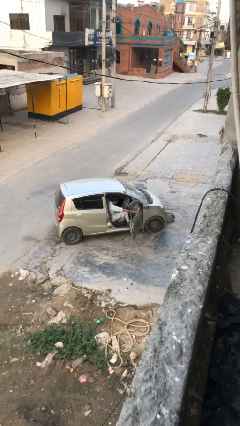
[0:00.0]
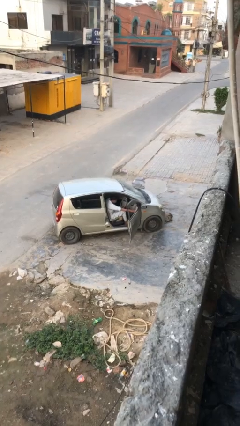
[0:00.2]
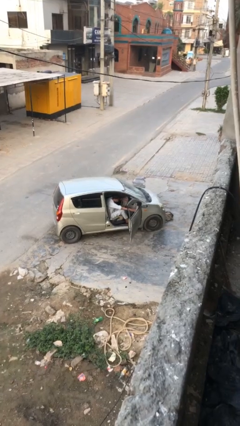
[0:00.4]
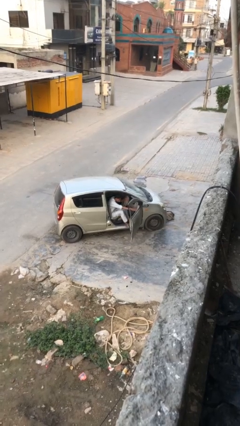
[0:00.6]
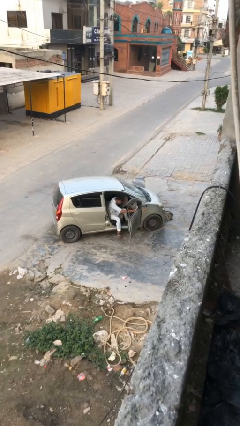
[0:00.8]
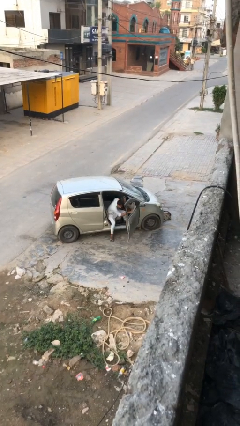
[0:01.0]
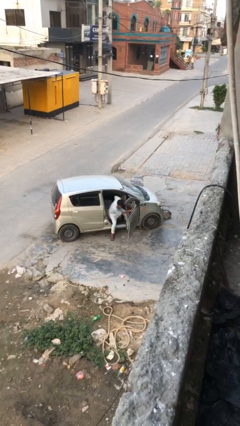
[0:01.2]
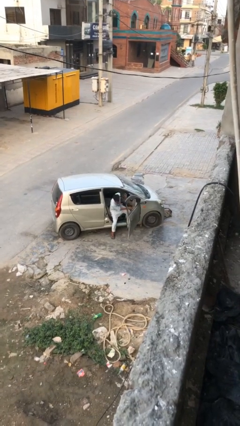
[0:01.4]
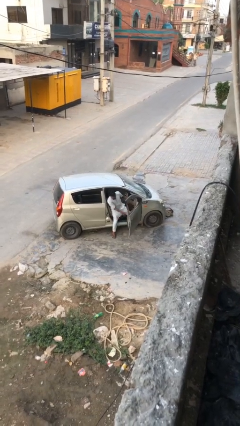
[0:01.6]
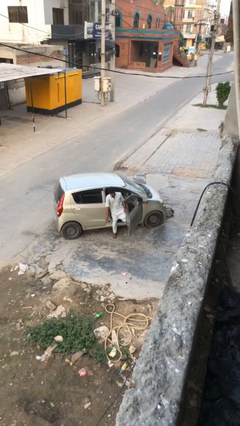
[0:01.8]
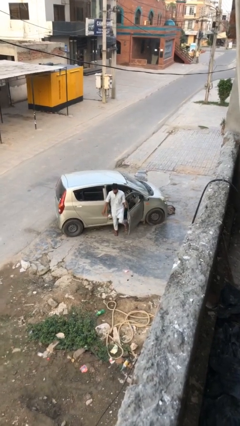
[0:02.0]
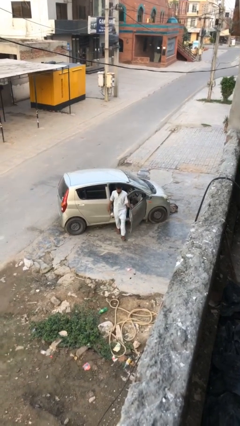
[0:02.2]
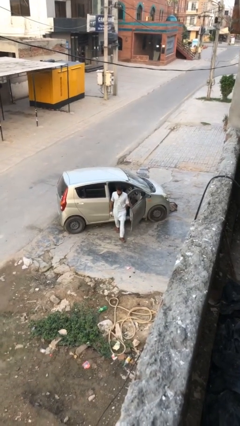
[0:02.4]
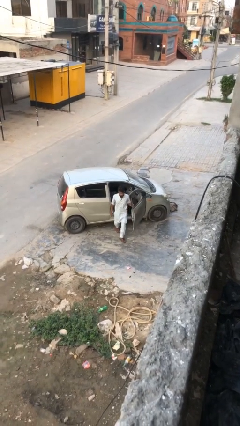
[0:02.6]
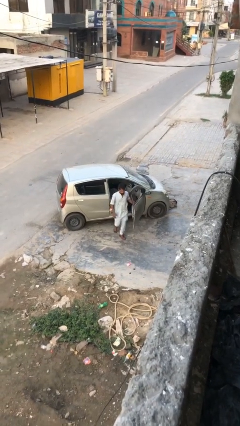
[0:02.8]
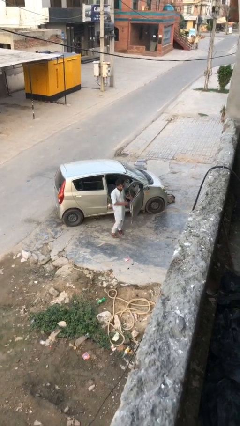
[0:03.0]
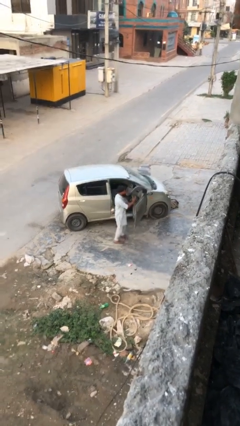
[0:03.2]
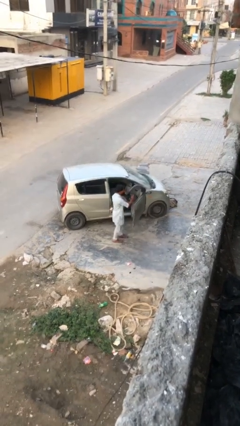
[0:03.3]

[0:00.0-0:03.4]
person exits car

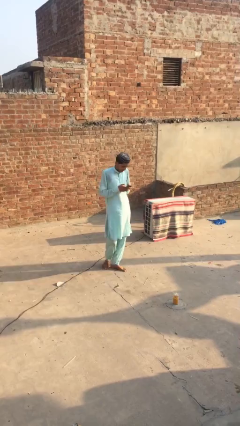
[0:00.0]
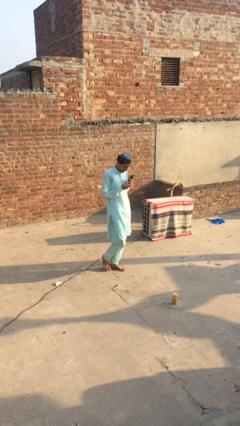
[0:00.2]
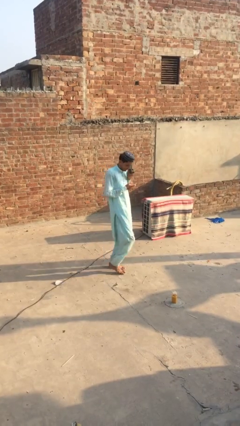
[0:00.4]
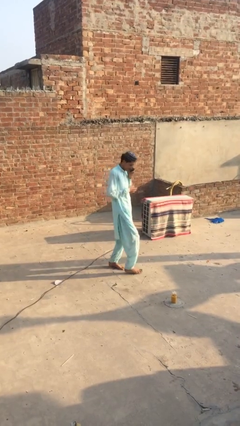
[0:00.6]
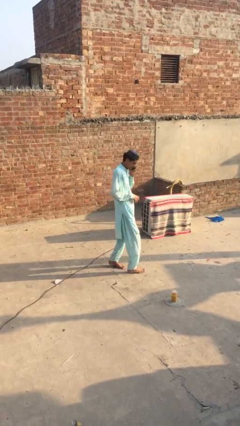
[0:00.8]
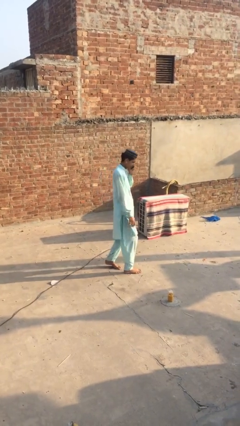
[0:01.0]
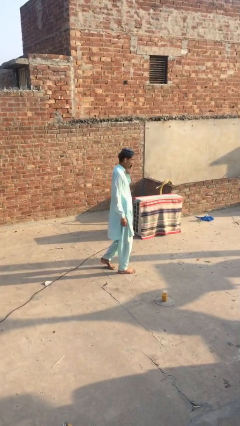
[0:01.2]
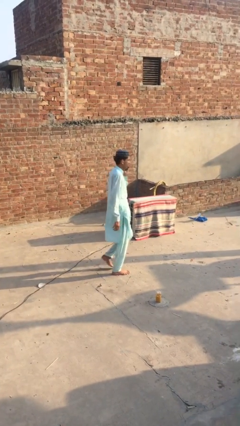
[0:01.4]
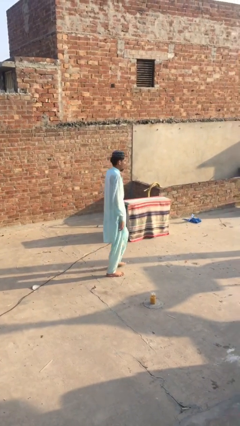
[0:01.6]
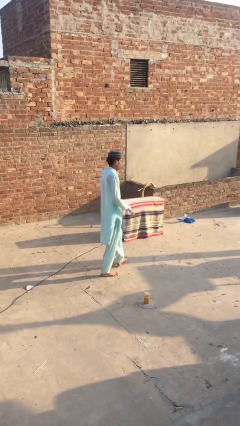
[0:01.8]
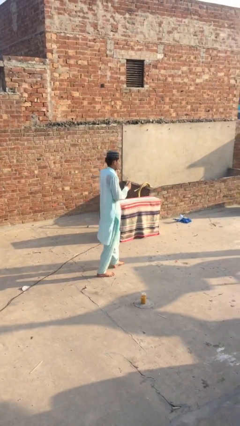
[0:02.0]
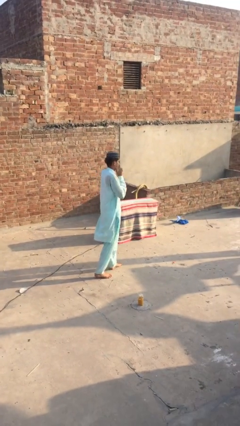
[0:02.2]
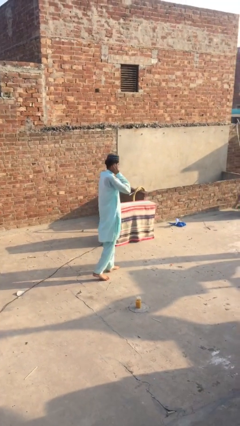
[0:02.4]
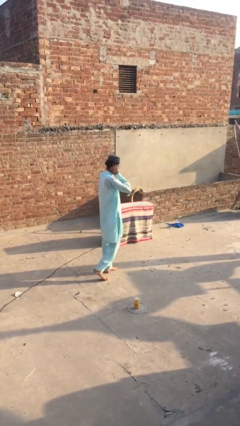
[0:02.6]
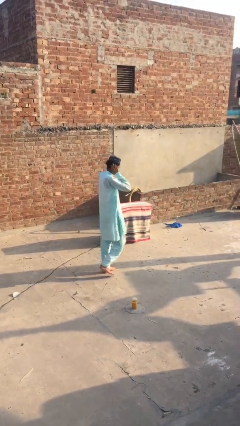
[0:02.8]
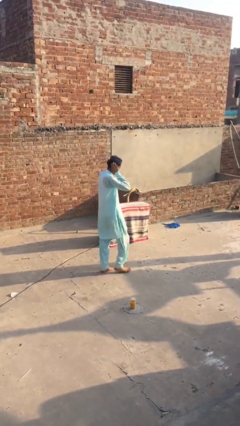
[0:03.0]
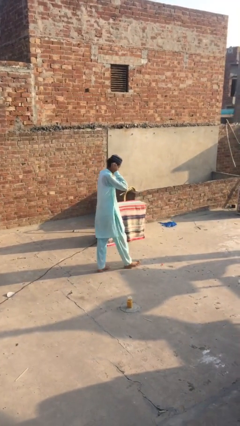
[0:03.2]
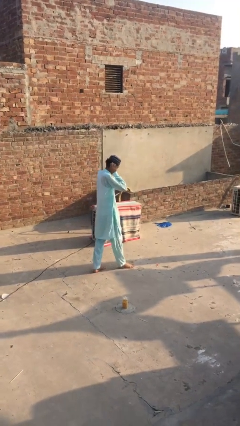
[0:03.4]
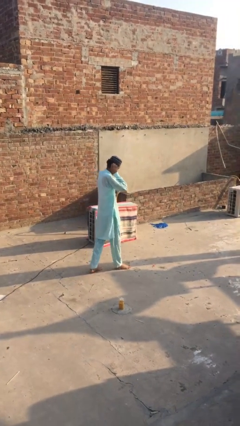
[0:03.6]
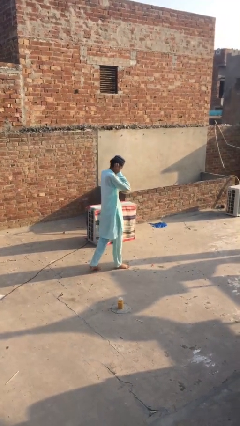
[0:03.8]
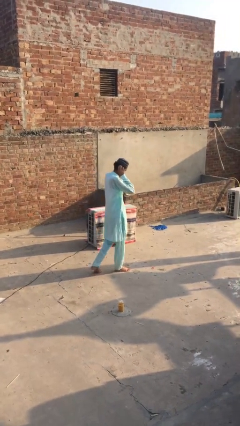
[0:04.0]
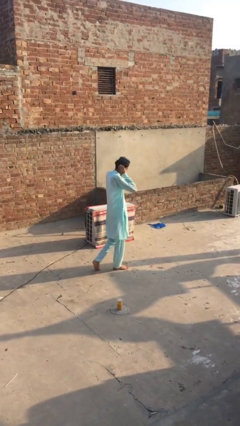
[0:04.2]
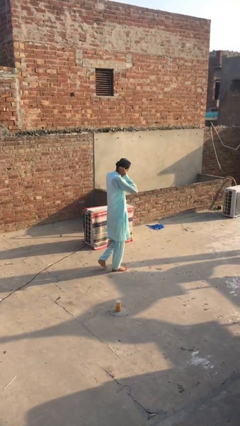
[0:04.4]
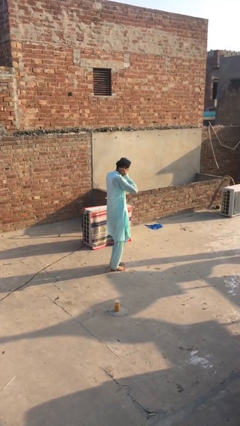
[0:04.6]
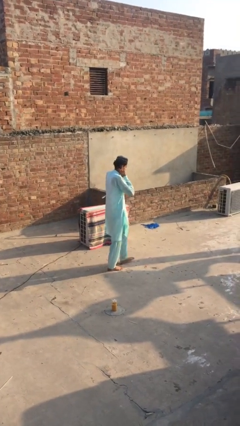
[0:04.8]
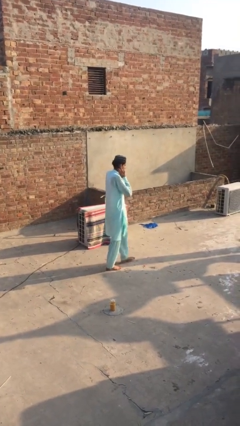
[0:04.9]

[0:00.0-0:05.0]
person talks on phone

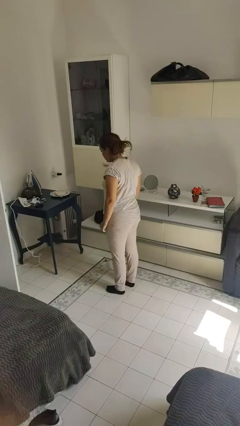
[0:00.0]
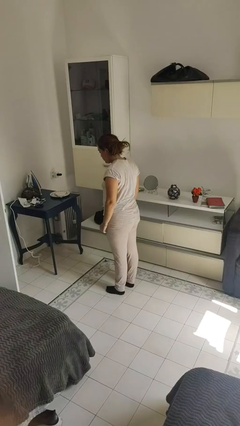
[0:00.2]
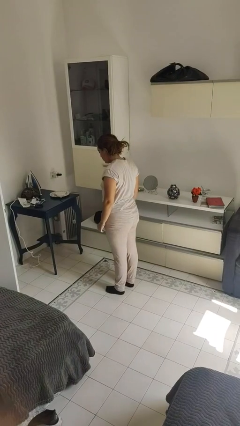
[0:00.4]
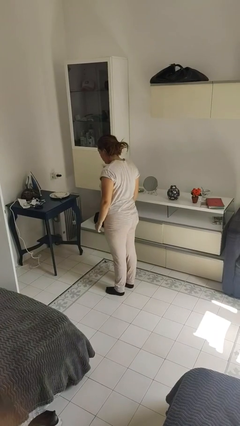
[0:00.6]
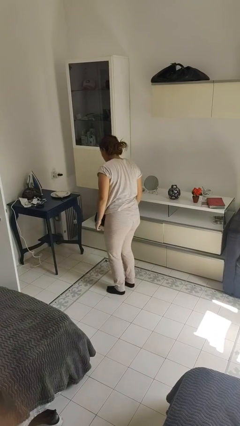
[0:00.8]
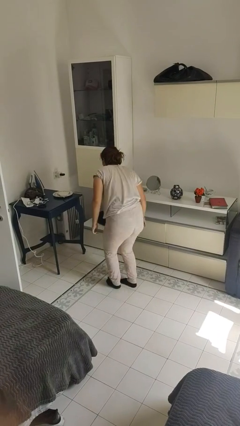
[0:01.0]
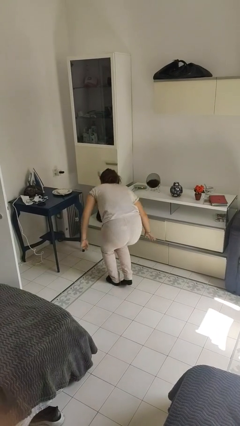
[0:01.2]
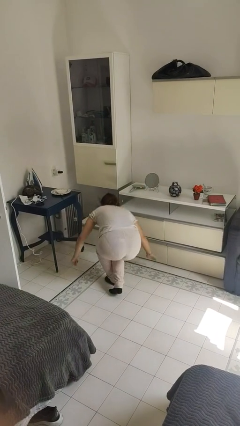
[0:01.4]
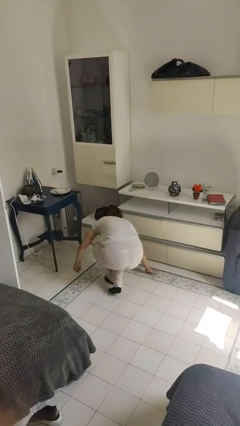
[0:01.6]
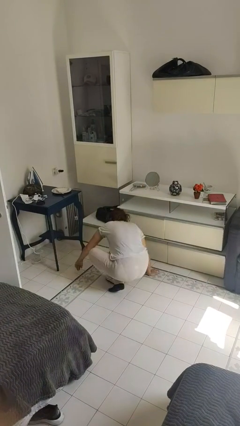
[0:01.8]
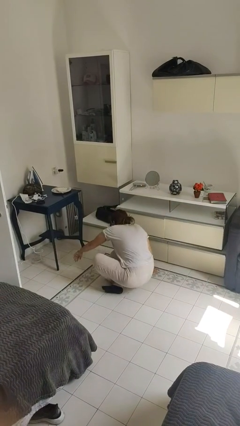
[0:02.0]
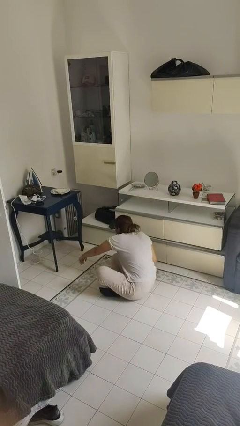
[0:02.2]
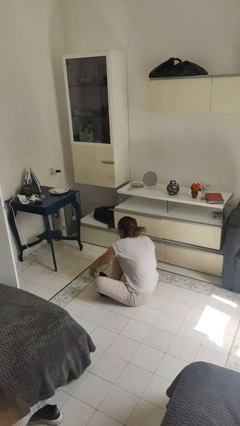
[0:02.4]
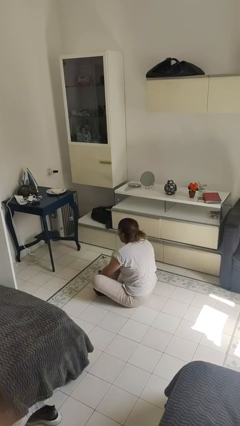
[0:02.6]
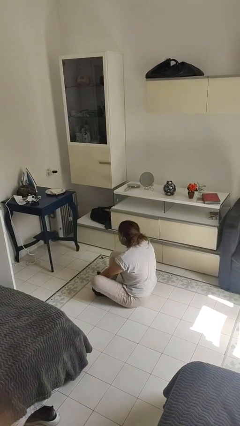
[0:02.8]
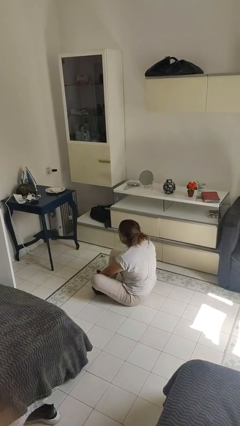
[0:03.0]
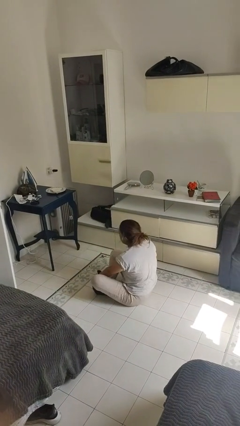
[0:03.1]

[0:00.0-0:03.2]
person sits crisscross

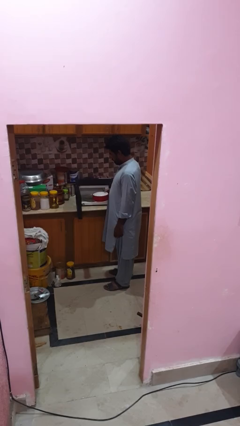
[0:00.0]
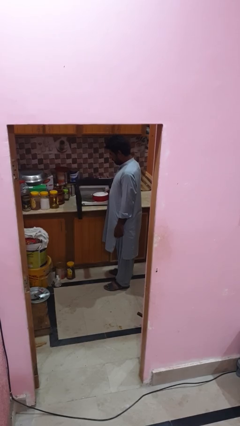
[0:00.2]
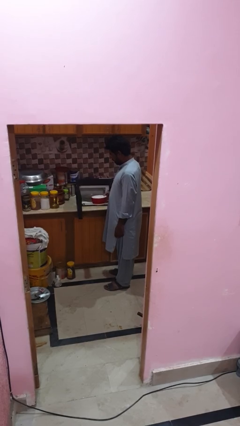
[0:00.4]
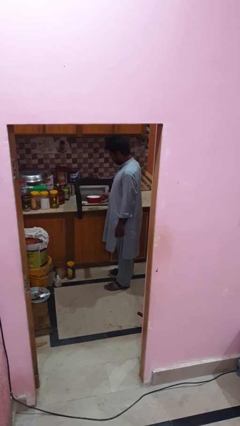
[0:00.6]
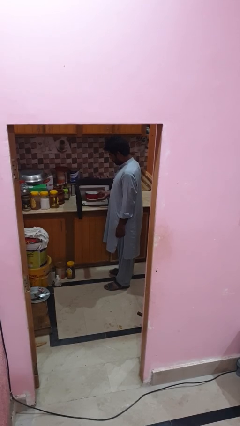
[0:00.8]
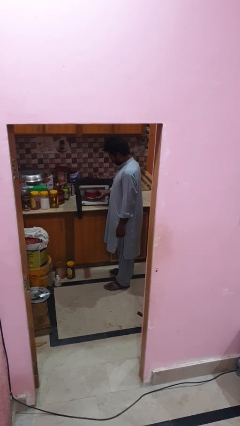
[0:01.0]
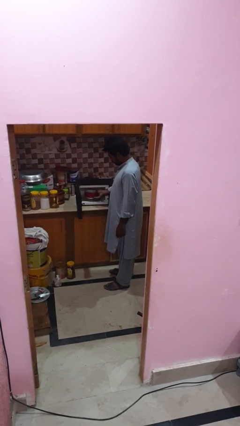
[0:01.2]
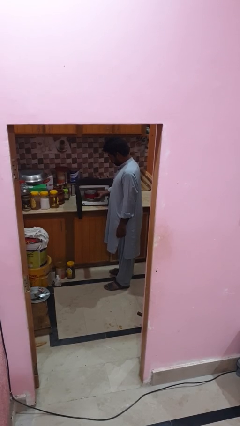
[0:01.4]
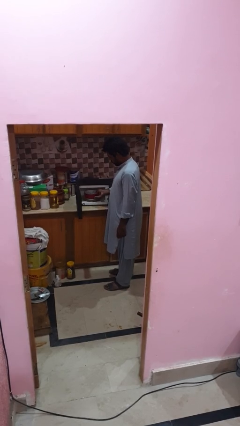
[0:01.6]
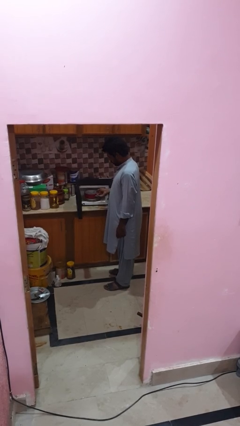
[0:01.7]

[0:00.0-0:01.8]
person puts object into microwave

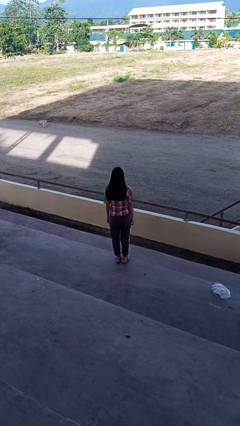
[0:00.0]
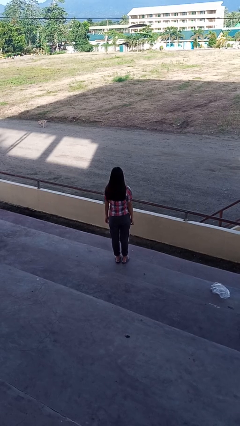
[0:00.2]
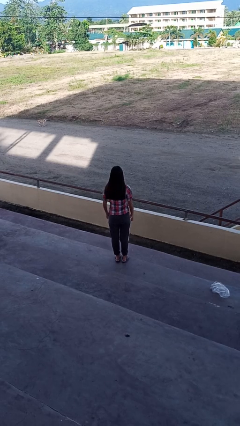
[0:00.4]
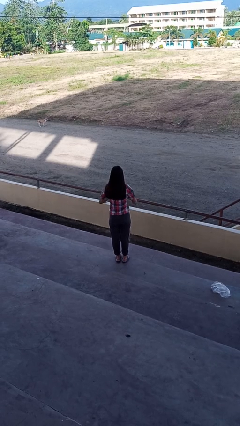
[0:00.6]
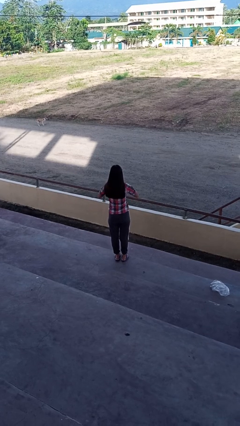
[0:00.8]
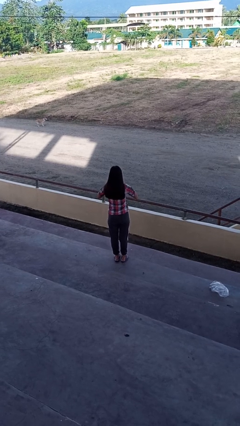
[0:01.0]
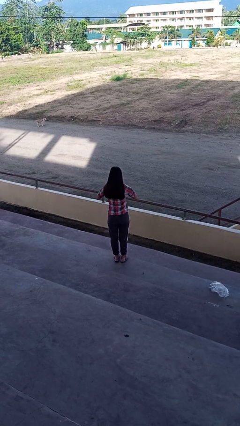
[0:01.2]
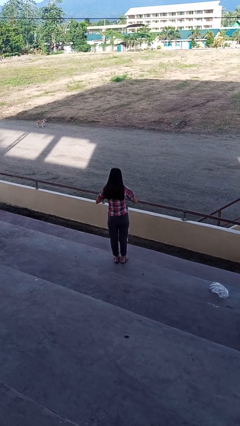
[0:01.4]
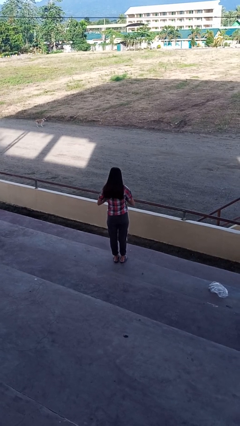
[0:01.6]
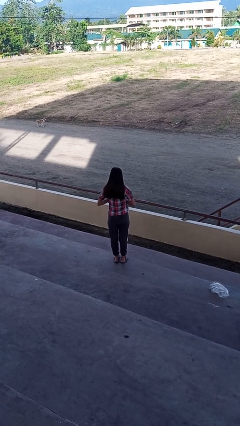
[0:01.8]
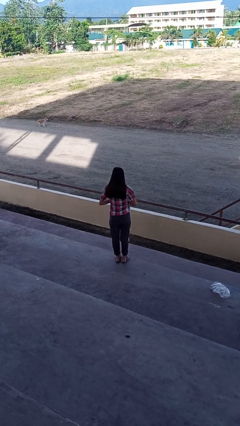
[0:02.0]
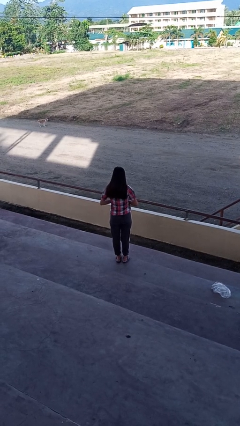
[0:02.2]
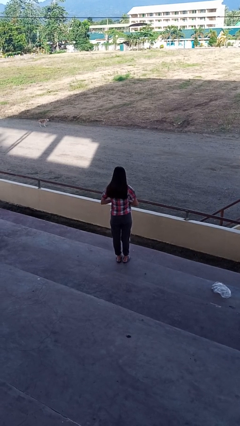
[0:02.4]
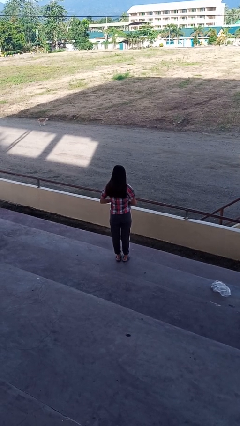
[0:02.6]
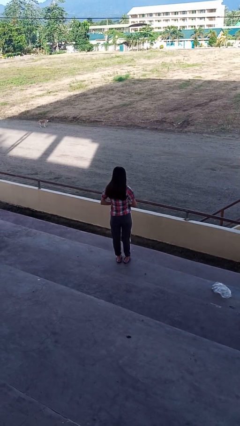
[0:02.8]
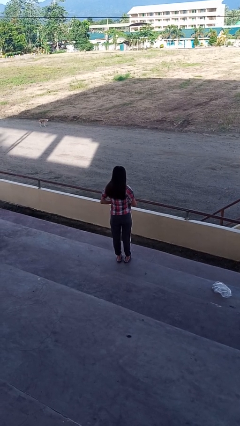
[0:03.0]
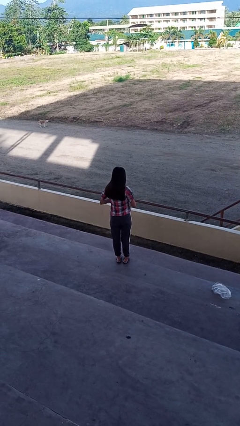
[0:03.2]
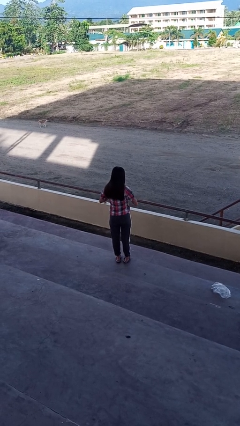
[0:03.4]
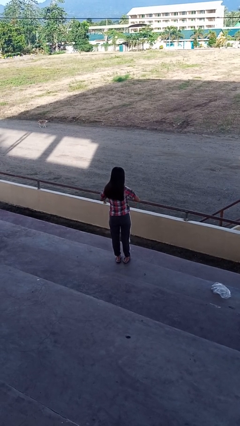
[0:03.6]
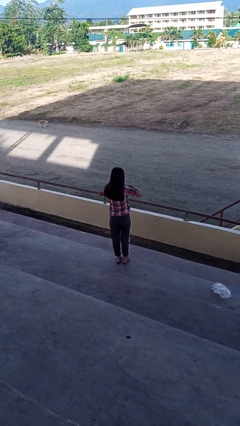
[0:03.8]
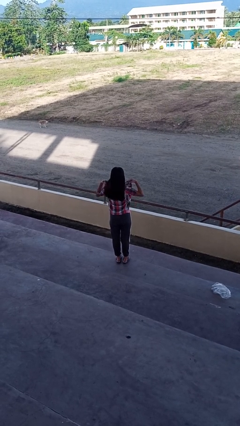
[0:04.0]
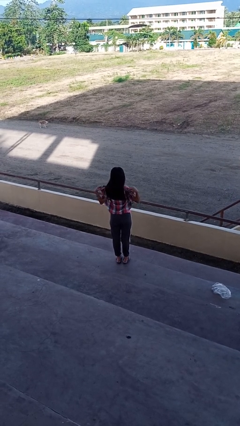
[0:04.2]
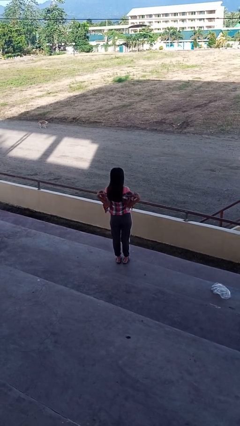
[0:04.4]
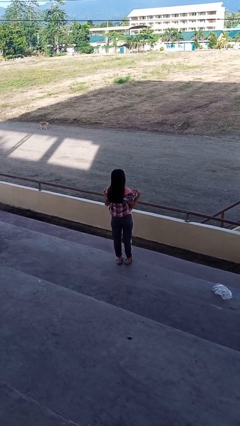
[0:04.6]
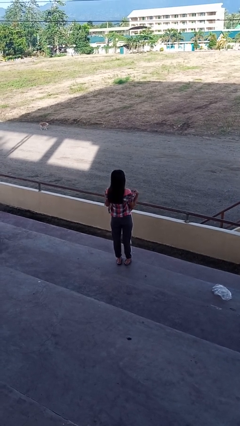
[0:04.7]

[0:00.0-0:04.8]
person unbuttons shirt
